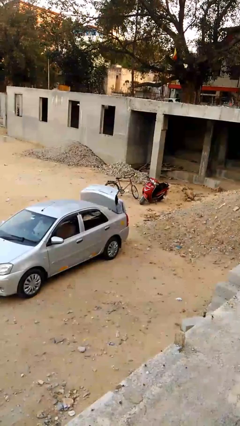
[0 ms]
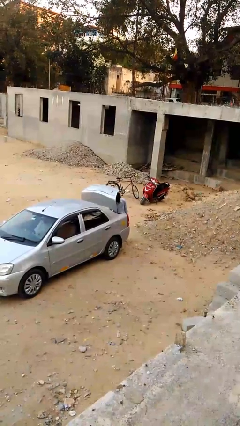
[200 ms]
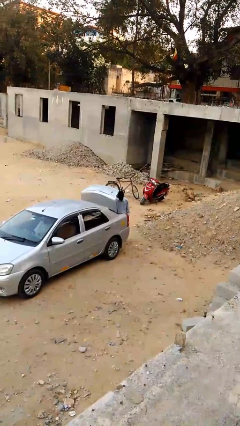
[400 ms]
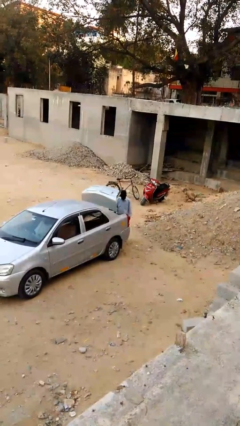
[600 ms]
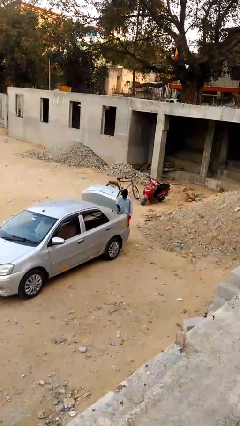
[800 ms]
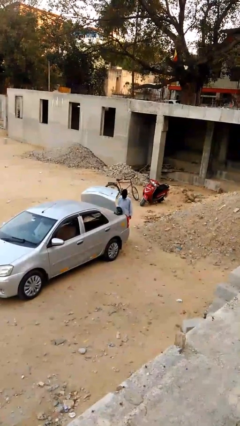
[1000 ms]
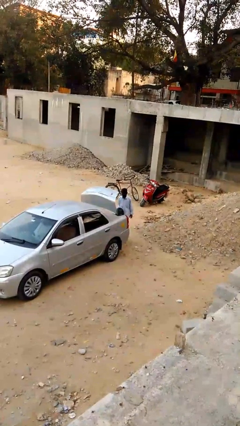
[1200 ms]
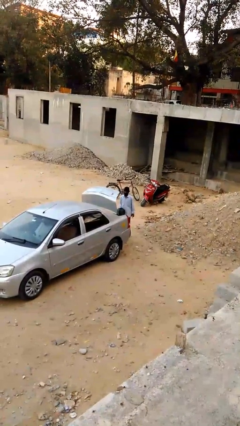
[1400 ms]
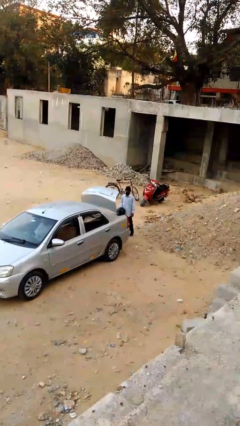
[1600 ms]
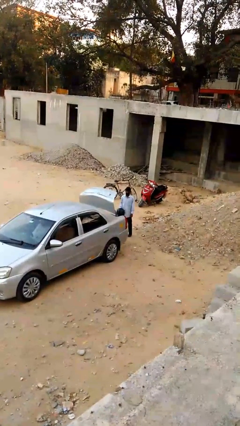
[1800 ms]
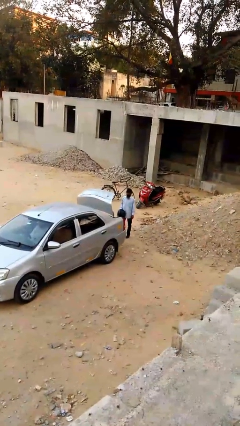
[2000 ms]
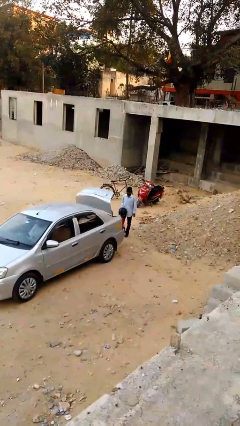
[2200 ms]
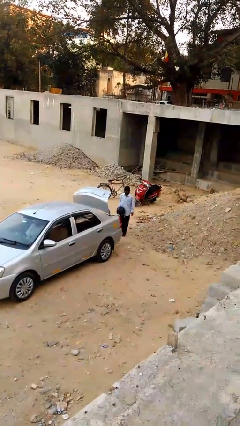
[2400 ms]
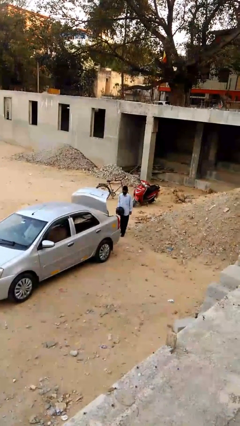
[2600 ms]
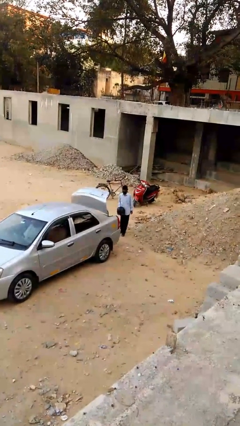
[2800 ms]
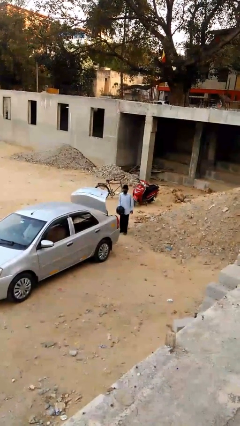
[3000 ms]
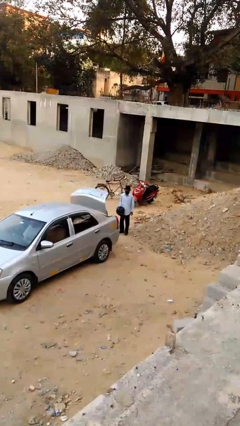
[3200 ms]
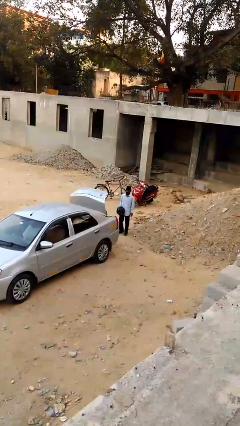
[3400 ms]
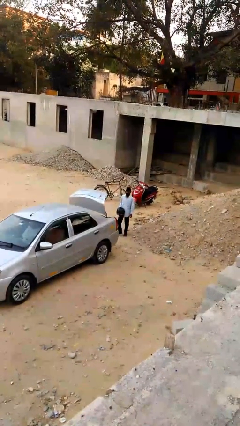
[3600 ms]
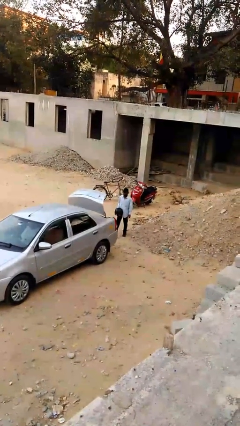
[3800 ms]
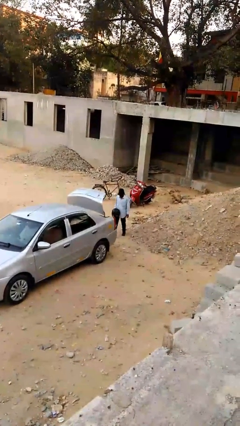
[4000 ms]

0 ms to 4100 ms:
person unloads car

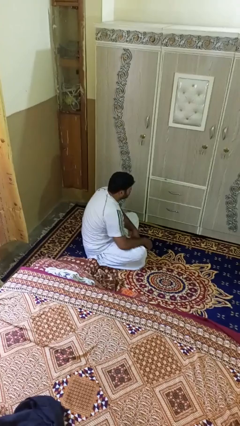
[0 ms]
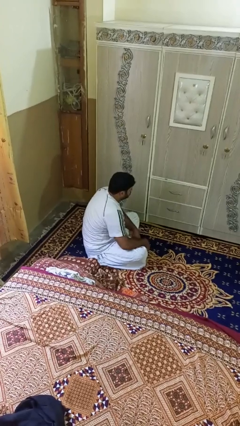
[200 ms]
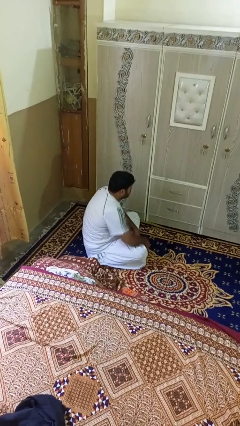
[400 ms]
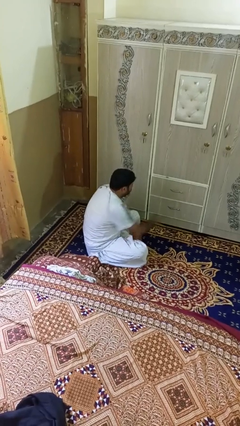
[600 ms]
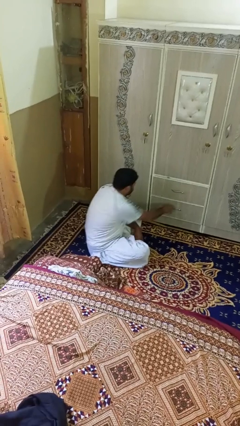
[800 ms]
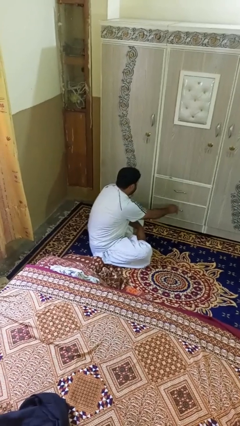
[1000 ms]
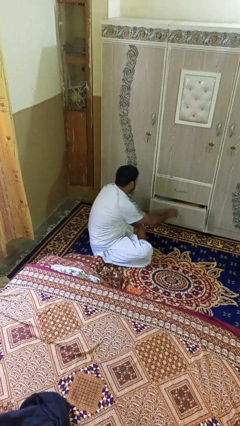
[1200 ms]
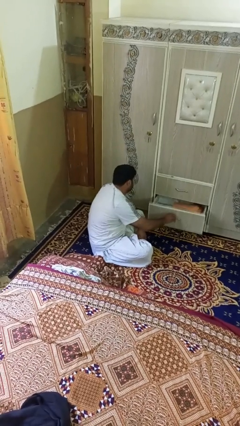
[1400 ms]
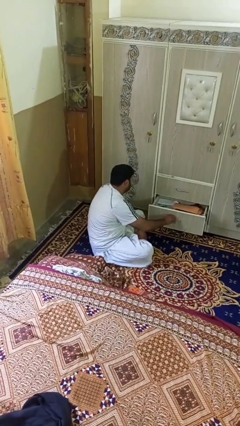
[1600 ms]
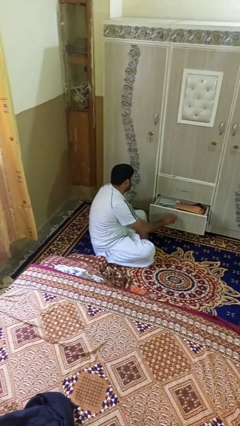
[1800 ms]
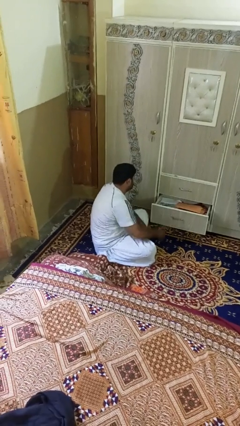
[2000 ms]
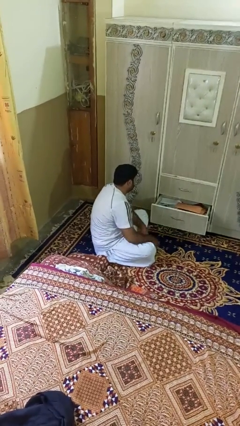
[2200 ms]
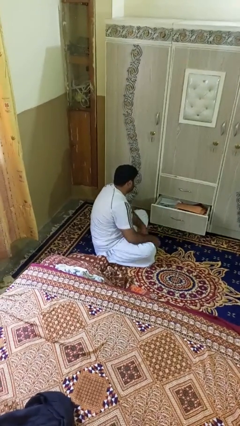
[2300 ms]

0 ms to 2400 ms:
person opens dresser drawer

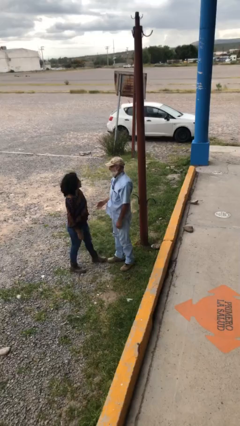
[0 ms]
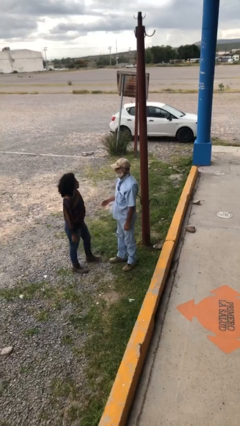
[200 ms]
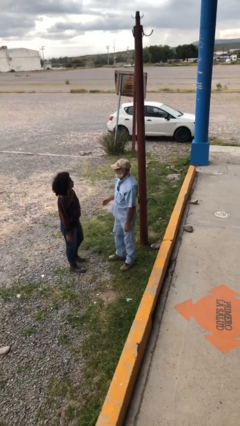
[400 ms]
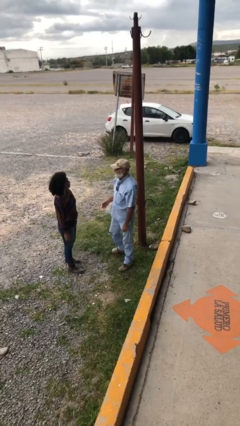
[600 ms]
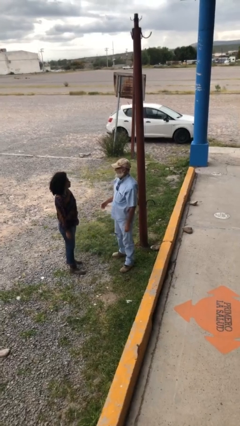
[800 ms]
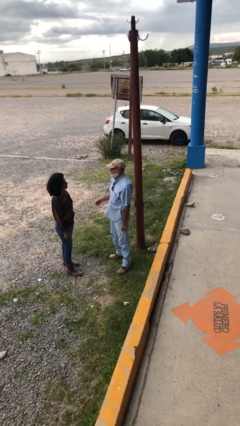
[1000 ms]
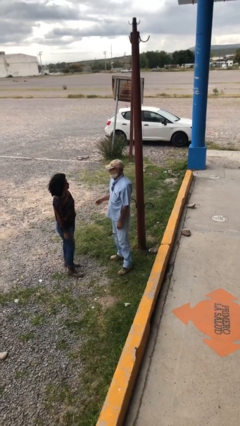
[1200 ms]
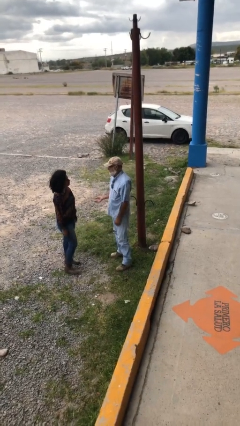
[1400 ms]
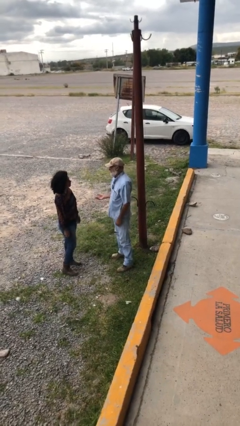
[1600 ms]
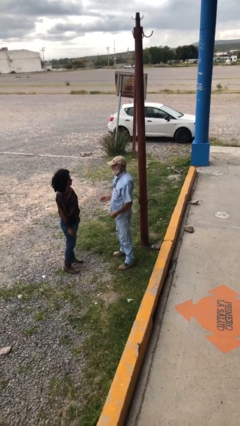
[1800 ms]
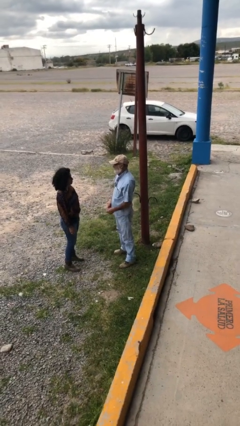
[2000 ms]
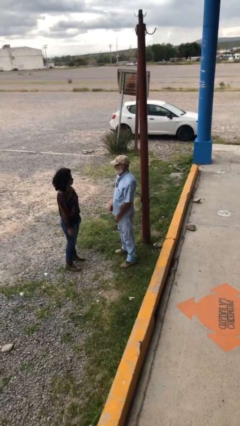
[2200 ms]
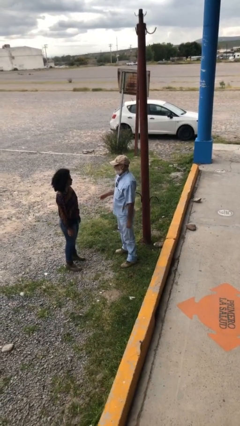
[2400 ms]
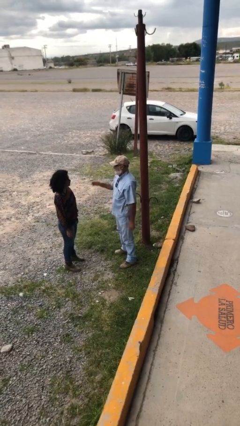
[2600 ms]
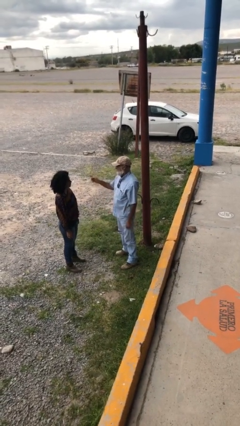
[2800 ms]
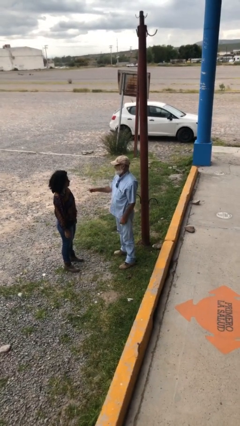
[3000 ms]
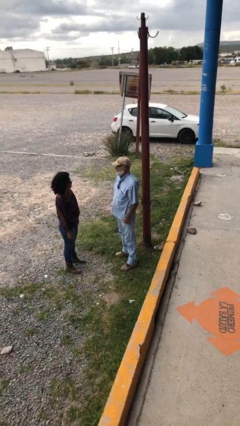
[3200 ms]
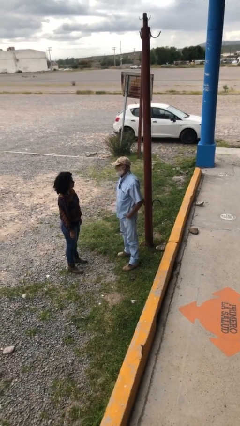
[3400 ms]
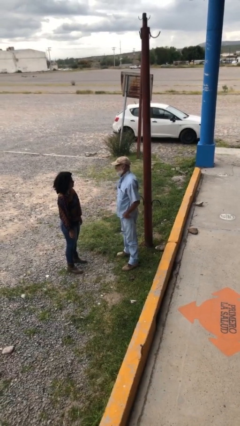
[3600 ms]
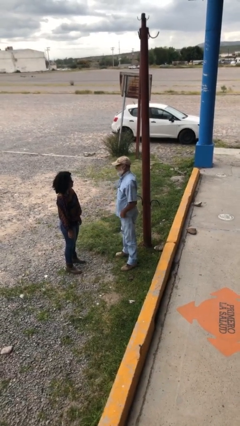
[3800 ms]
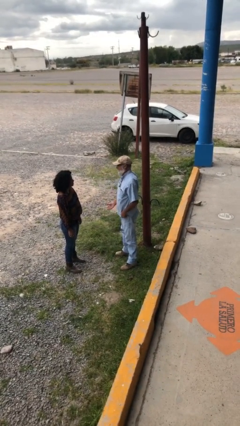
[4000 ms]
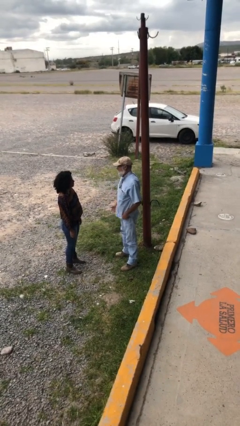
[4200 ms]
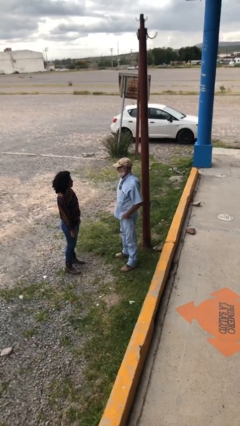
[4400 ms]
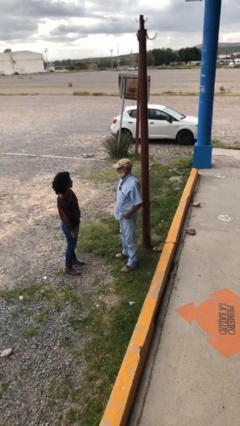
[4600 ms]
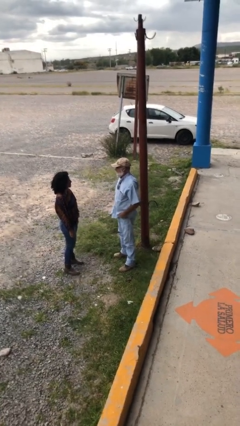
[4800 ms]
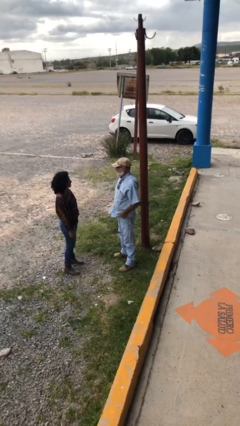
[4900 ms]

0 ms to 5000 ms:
person talks to person

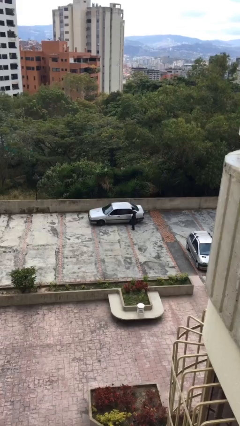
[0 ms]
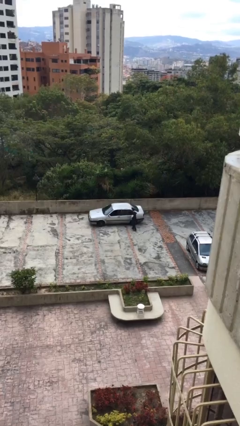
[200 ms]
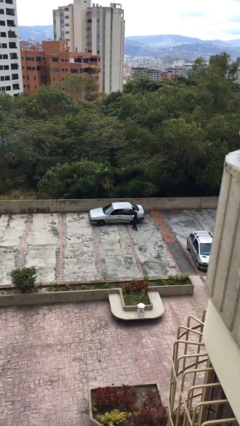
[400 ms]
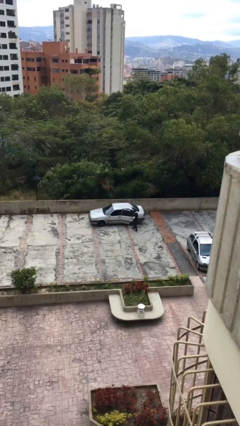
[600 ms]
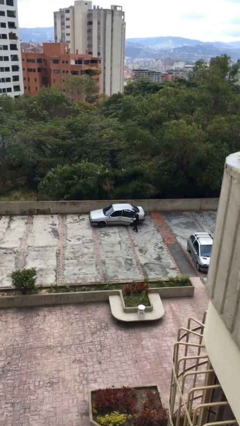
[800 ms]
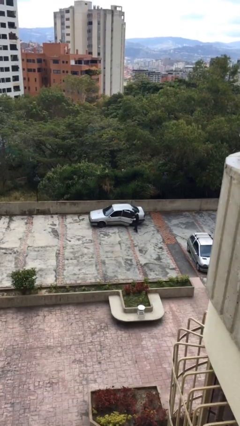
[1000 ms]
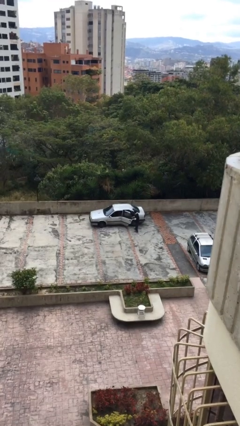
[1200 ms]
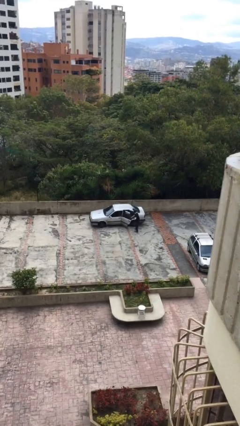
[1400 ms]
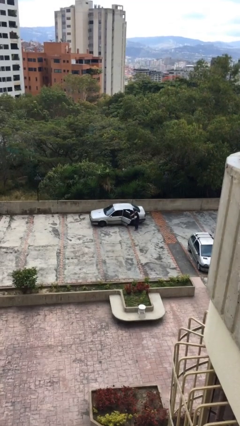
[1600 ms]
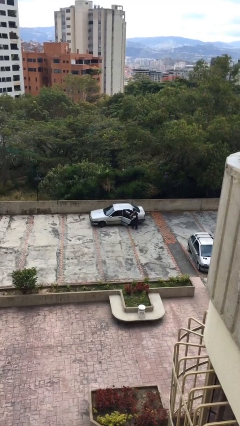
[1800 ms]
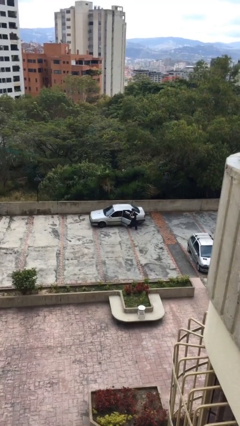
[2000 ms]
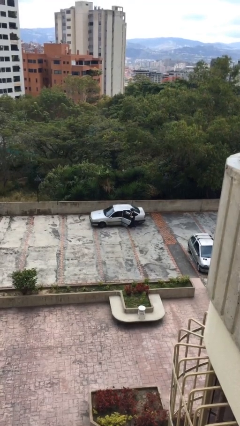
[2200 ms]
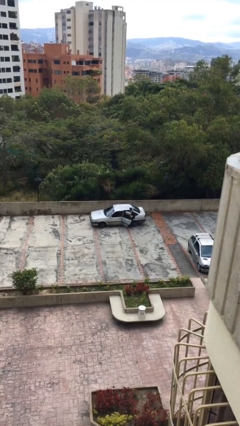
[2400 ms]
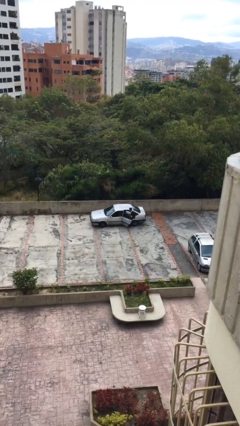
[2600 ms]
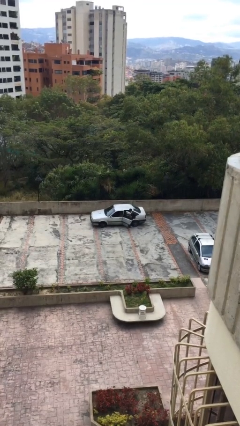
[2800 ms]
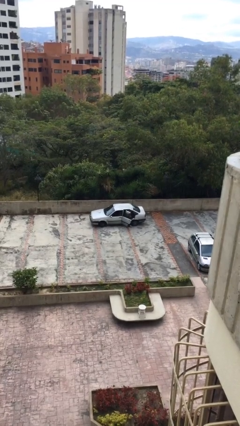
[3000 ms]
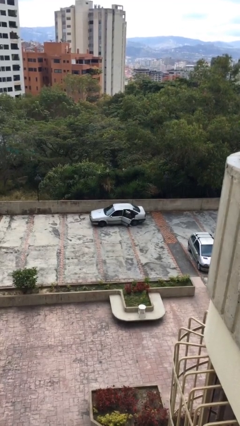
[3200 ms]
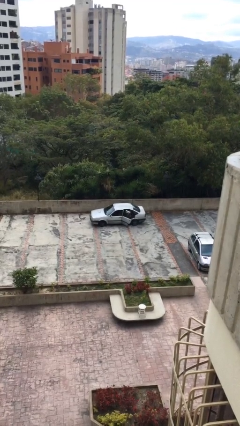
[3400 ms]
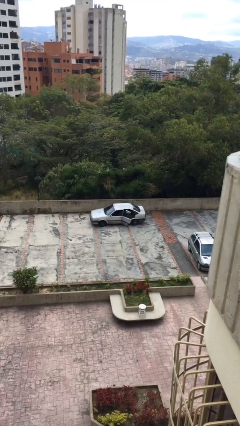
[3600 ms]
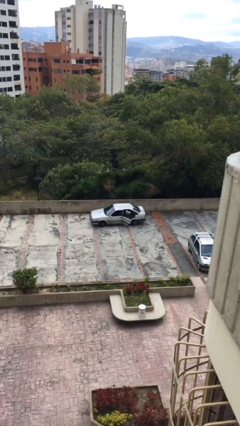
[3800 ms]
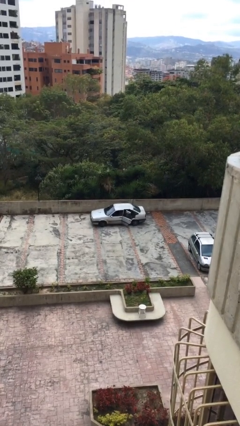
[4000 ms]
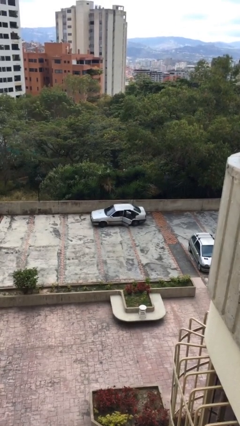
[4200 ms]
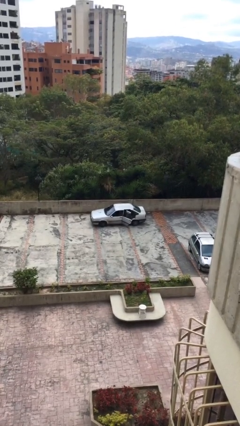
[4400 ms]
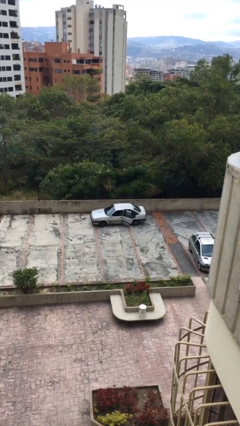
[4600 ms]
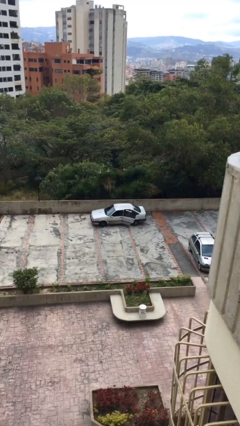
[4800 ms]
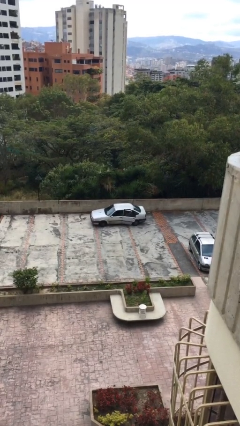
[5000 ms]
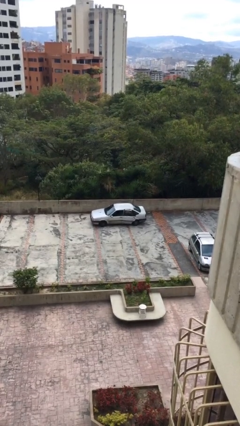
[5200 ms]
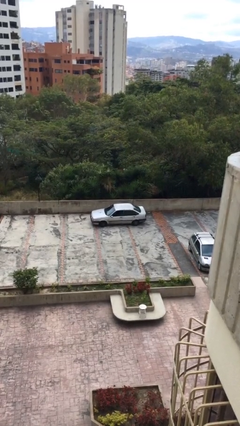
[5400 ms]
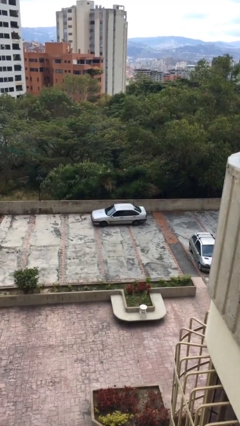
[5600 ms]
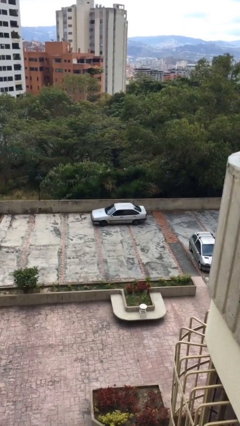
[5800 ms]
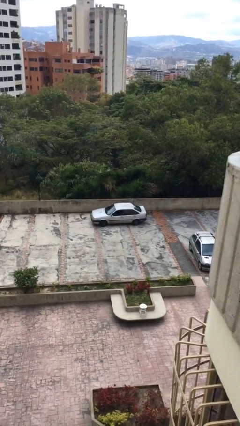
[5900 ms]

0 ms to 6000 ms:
car picks up person
